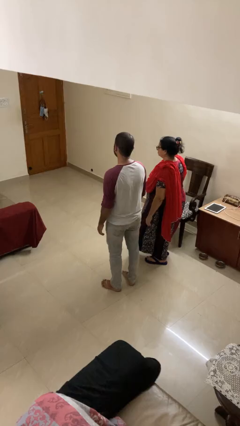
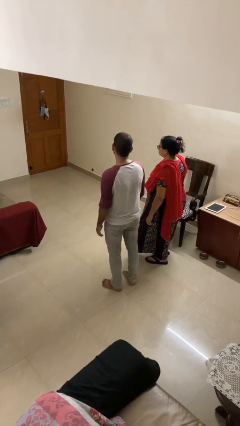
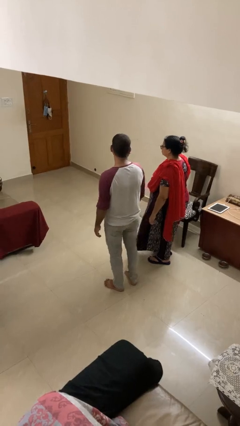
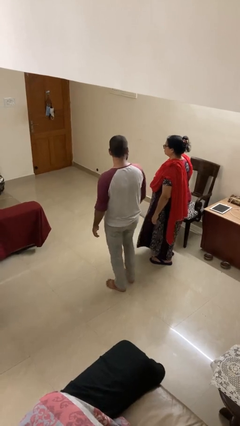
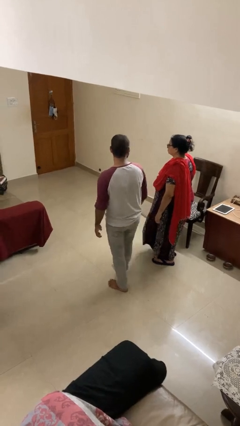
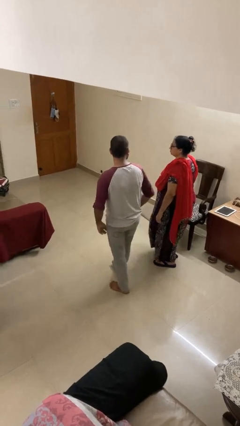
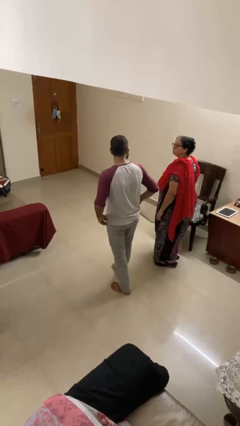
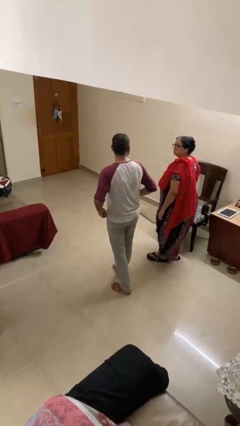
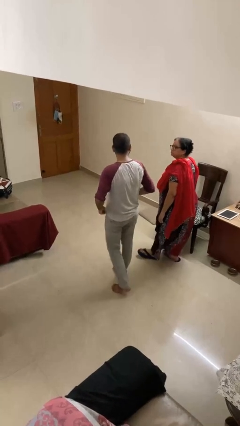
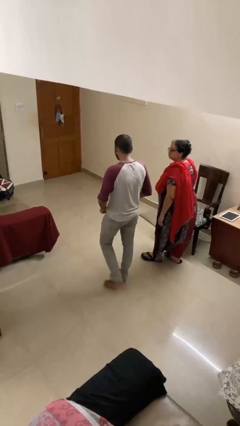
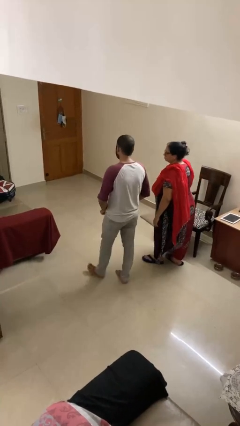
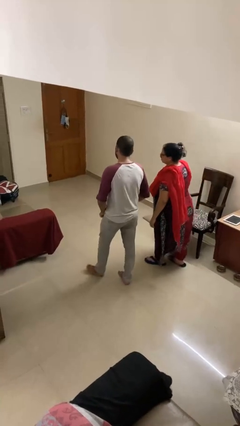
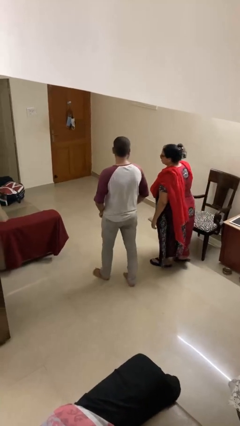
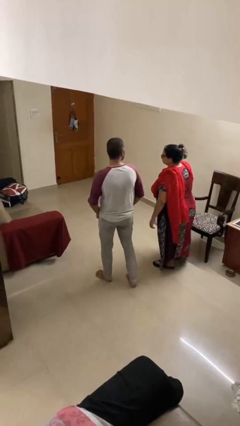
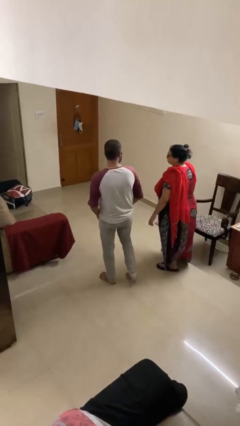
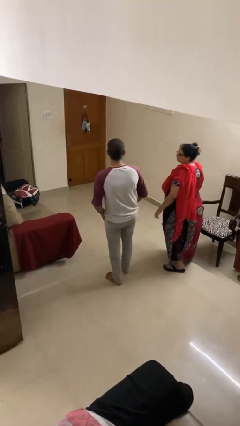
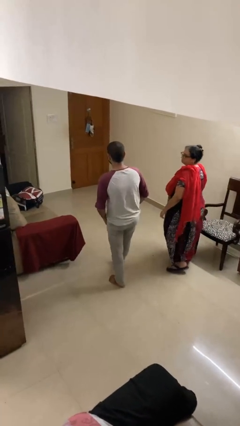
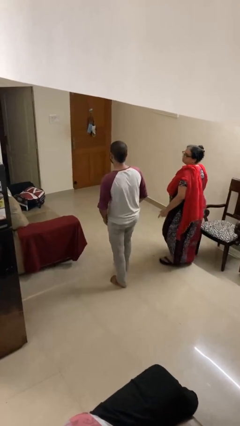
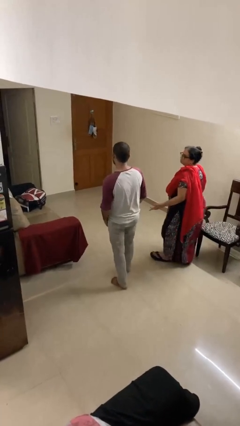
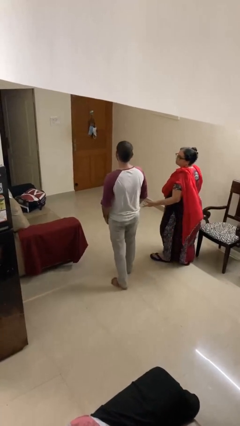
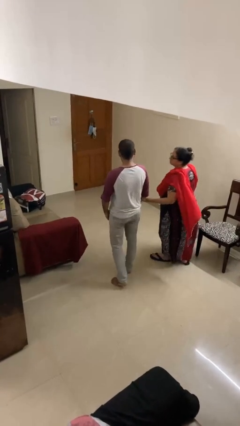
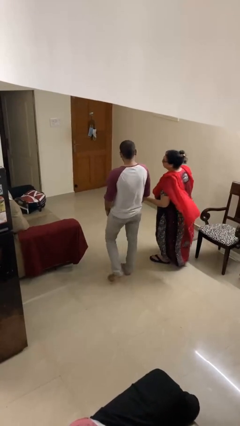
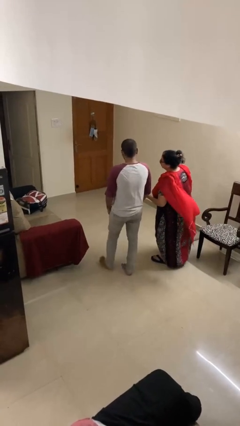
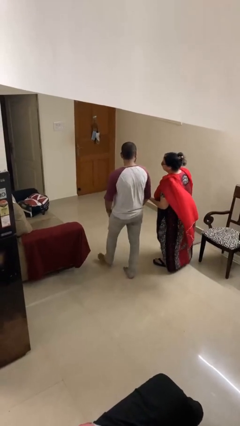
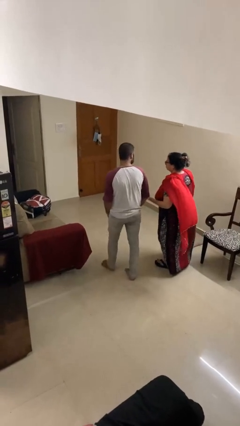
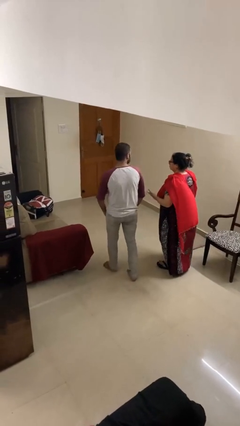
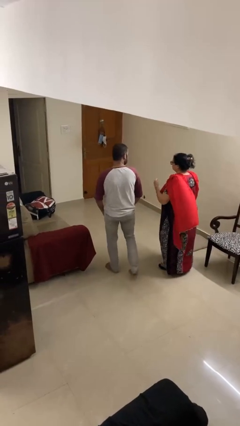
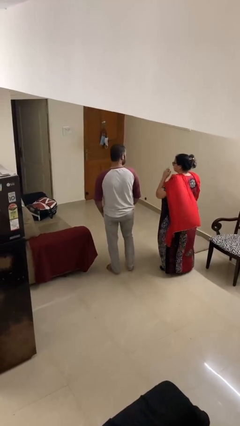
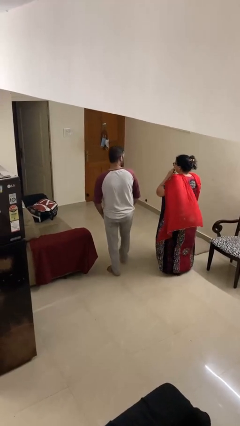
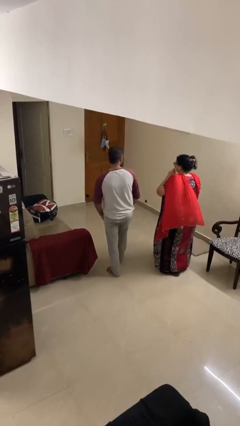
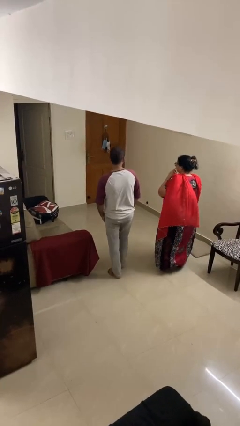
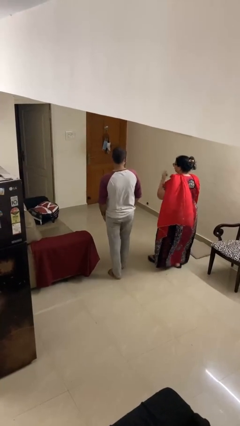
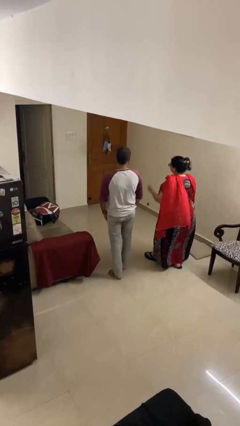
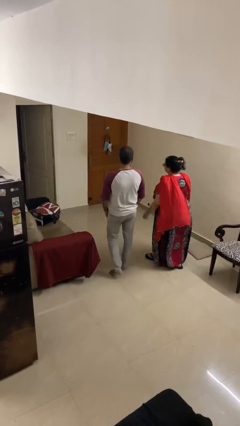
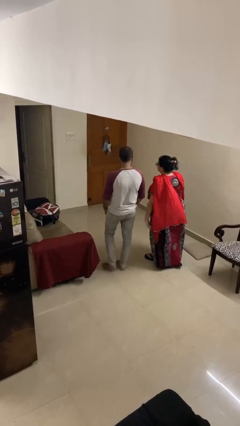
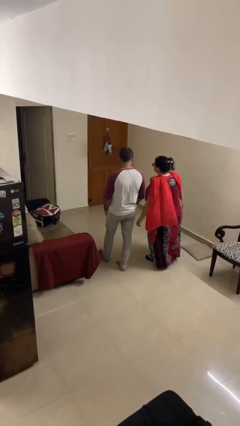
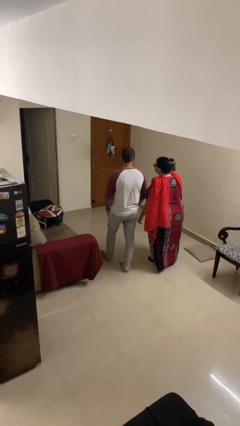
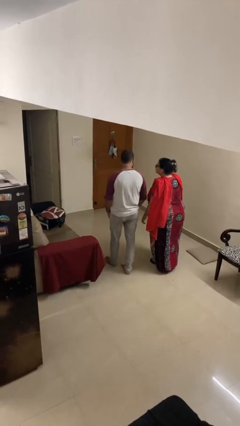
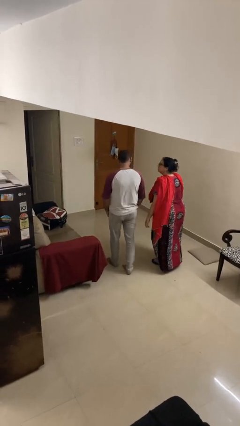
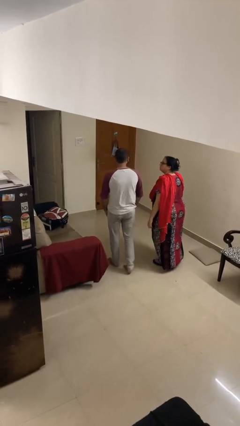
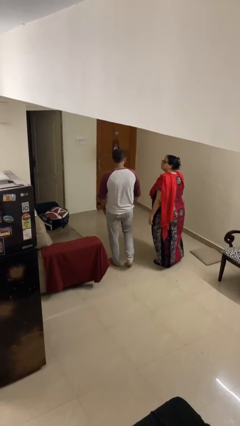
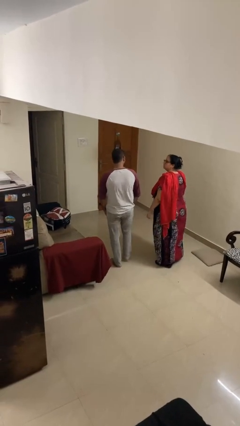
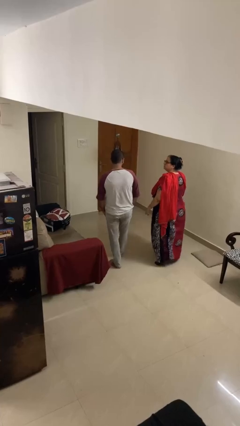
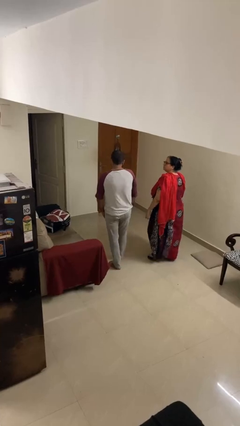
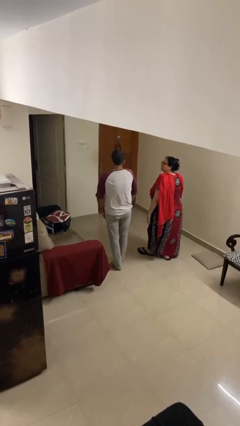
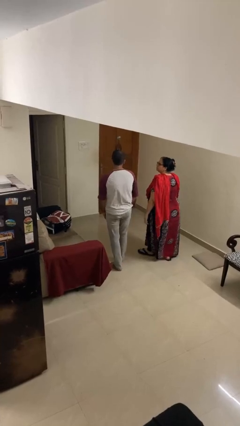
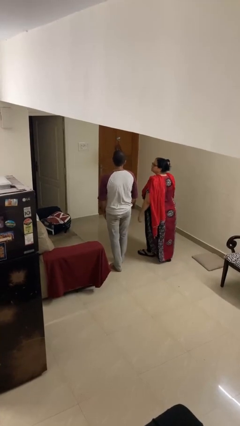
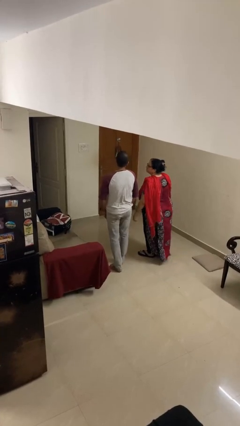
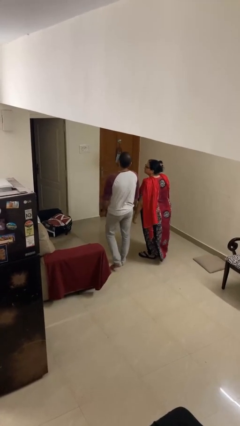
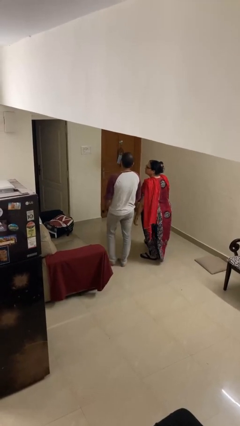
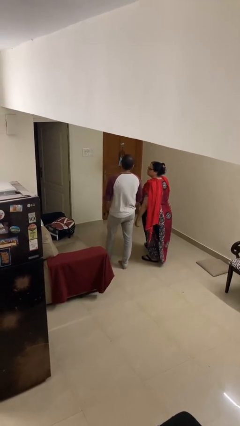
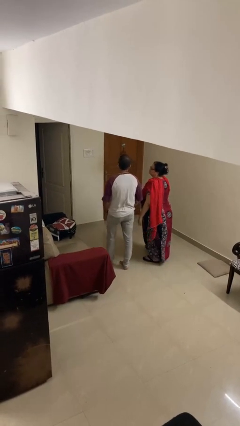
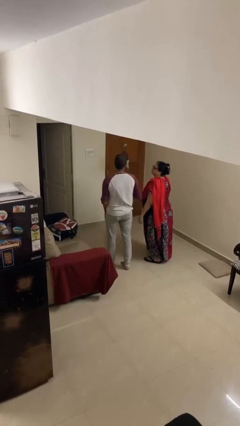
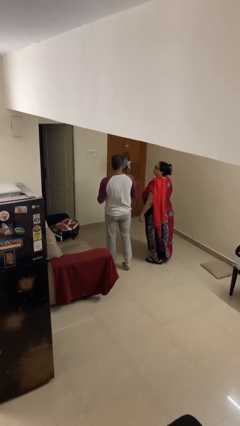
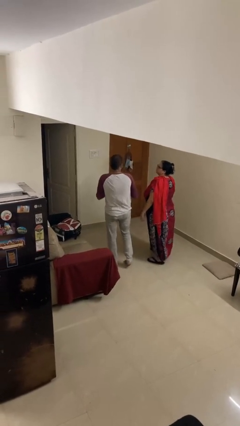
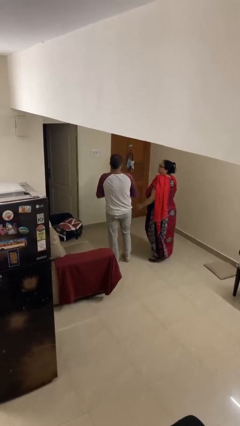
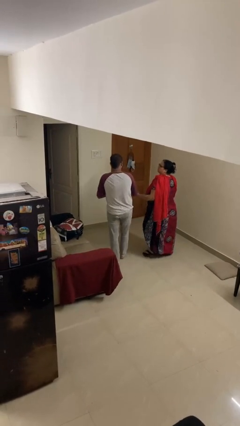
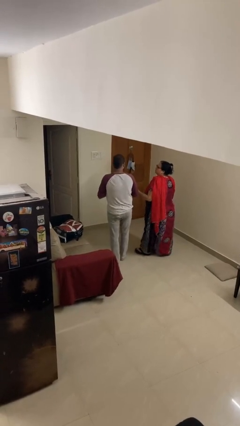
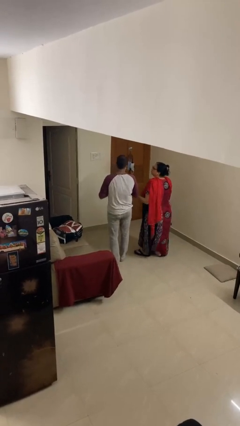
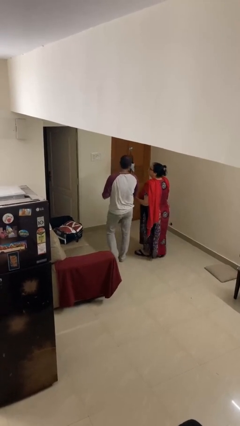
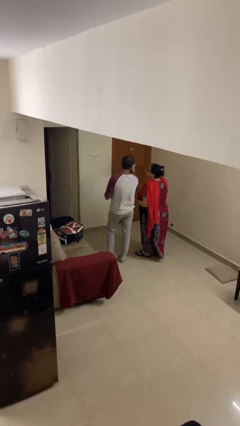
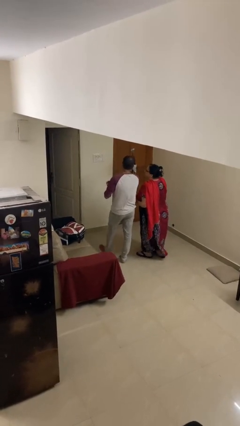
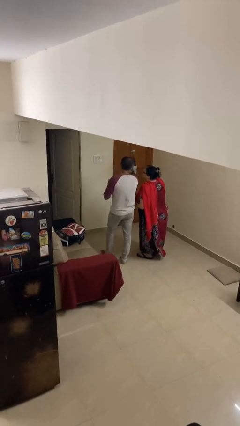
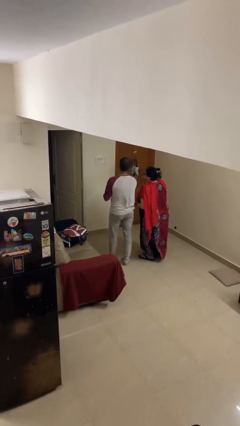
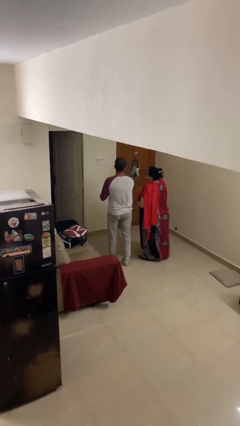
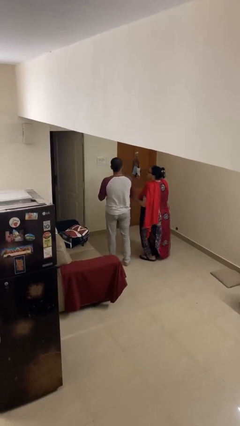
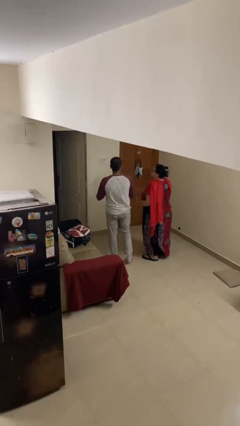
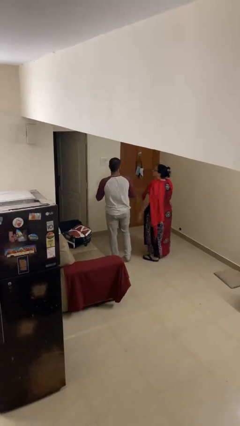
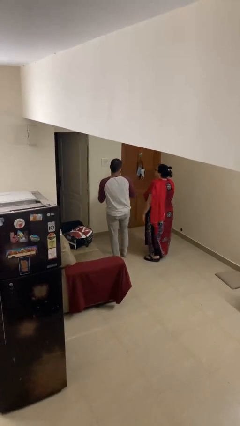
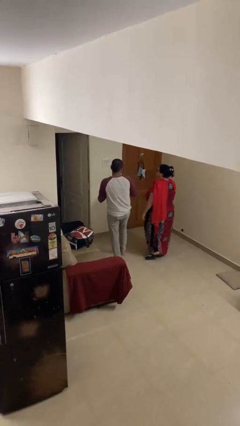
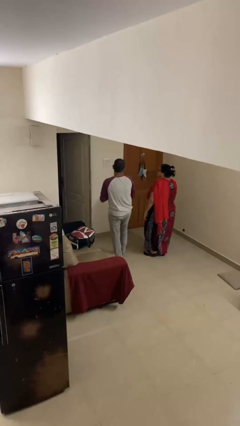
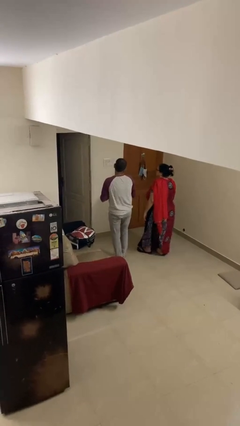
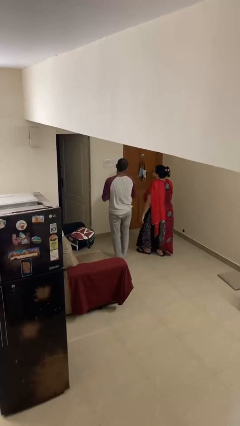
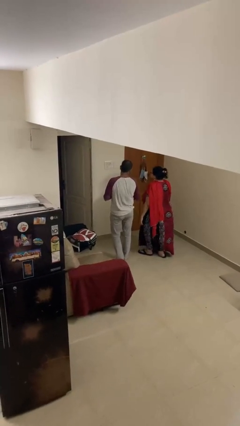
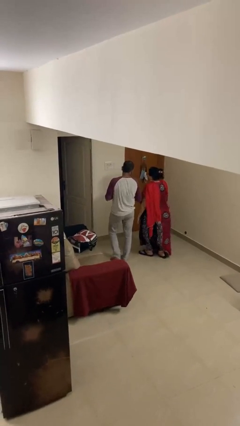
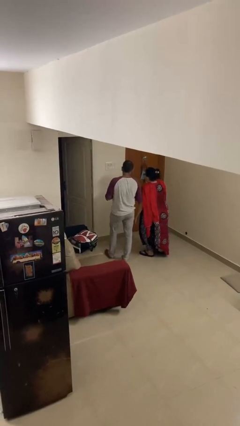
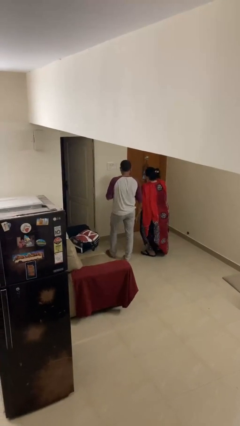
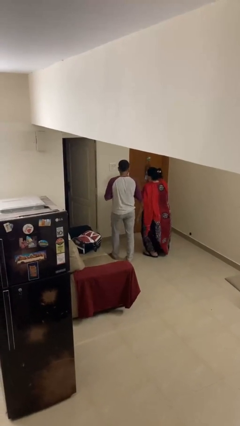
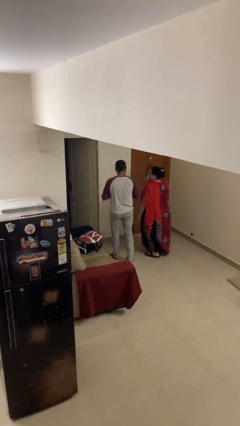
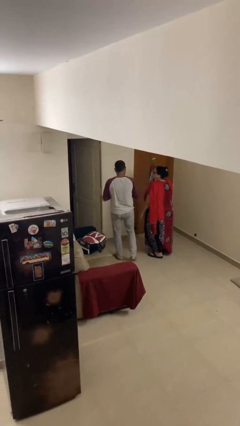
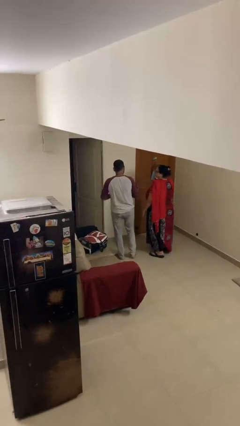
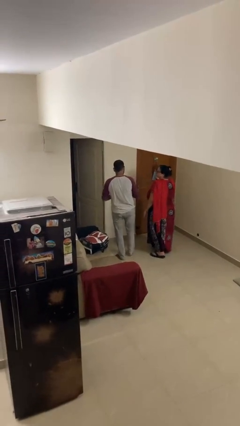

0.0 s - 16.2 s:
person talks to person

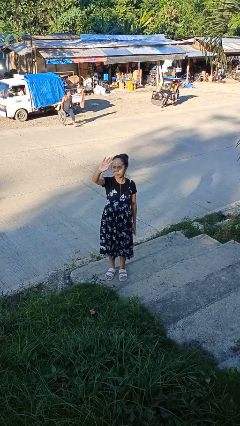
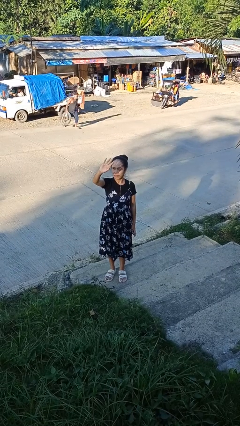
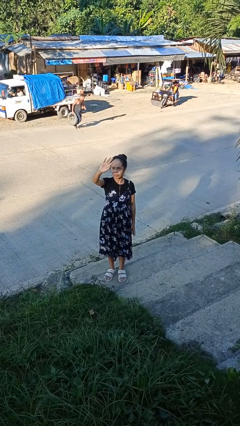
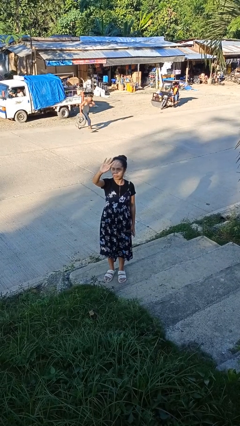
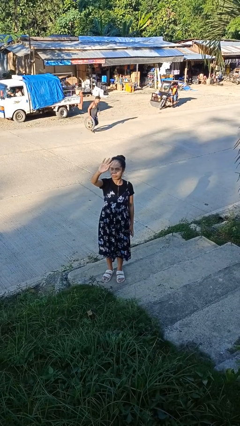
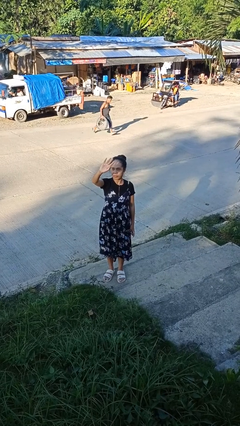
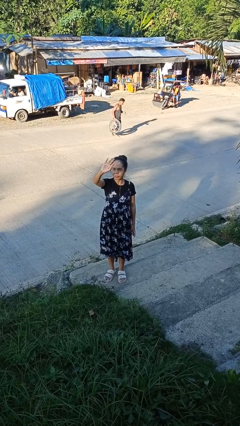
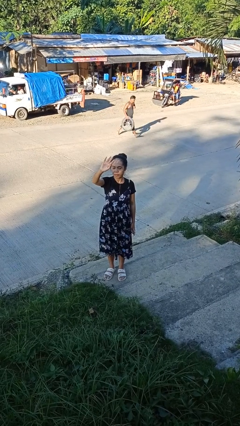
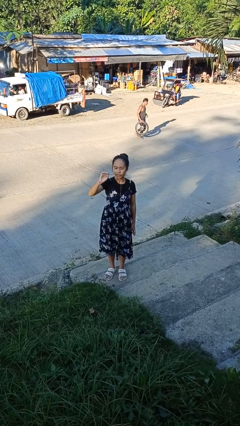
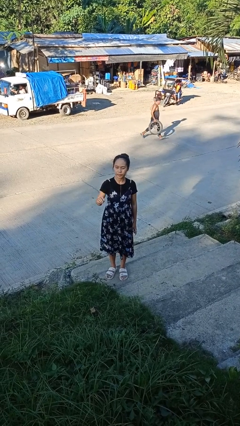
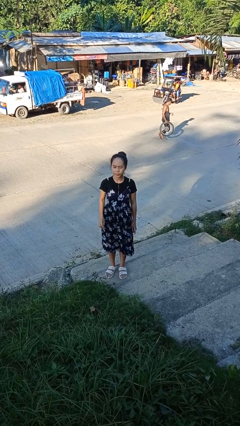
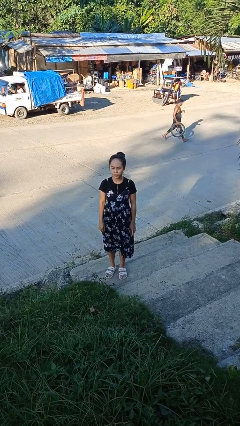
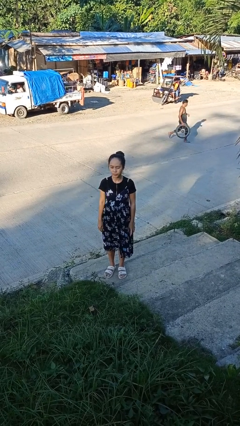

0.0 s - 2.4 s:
person shades eyes
